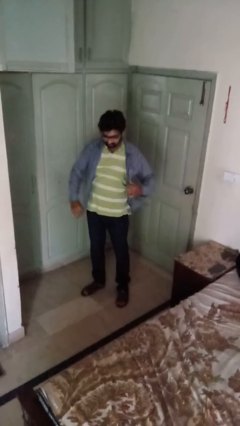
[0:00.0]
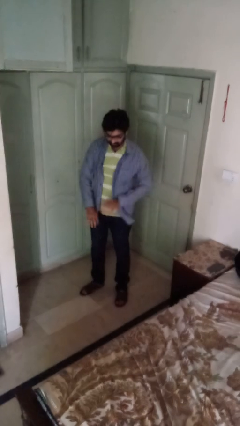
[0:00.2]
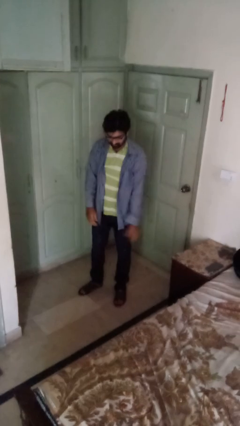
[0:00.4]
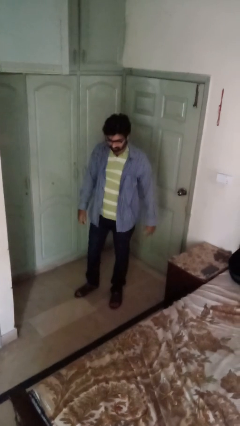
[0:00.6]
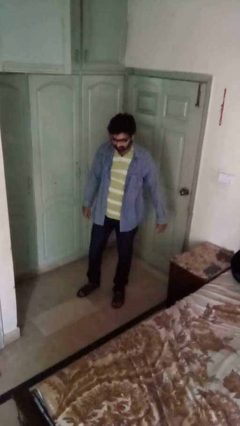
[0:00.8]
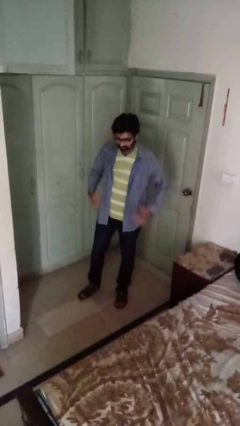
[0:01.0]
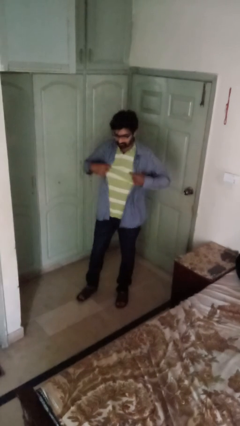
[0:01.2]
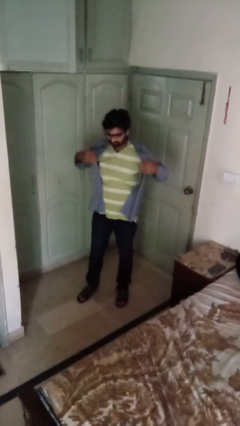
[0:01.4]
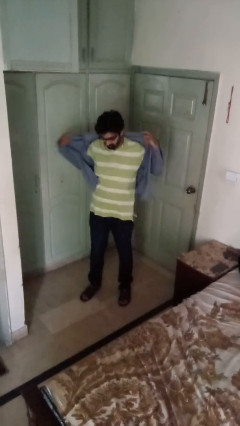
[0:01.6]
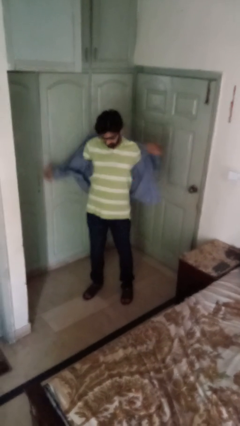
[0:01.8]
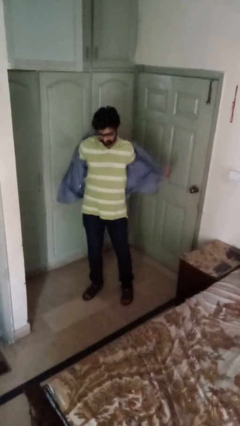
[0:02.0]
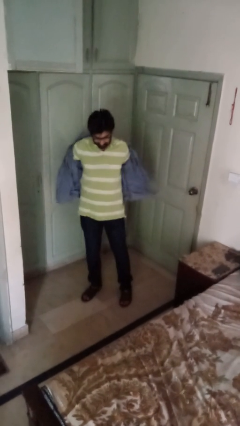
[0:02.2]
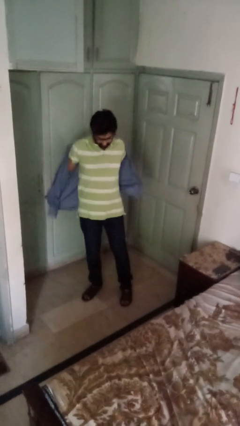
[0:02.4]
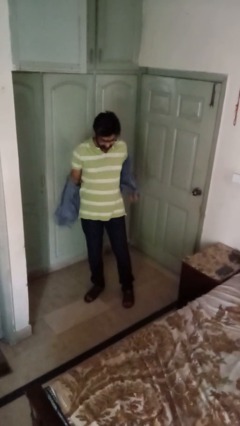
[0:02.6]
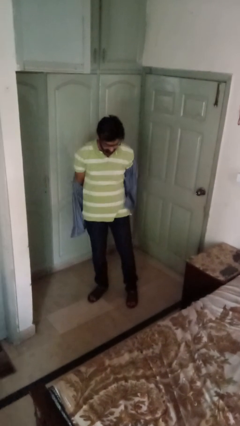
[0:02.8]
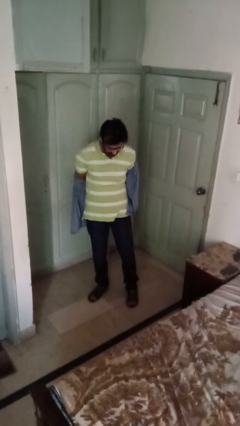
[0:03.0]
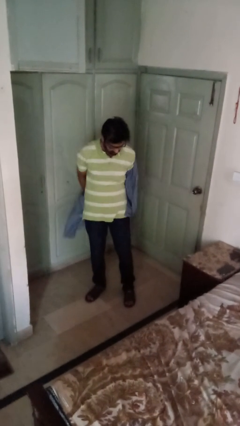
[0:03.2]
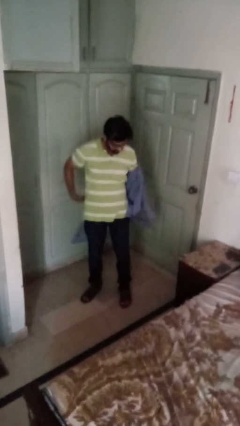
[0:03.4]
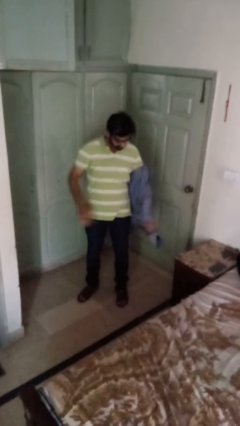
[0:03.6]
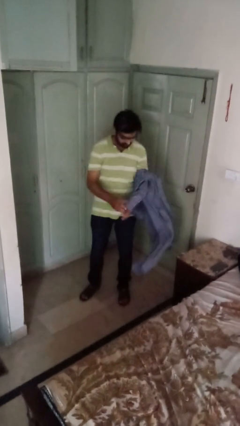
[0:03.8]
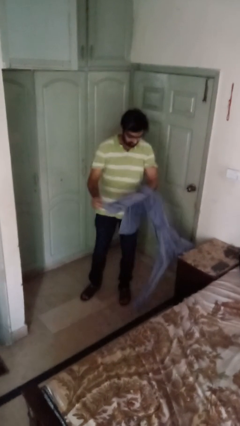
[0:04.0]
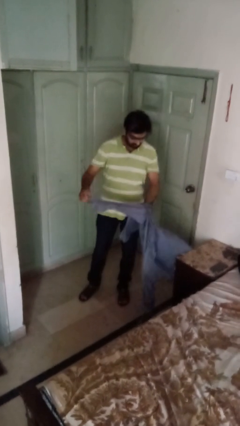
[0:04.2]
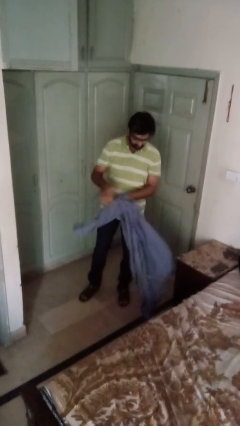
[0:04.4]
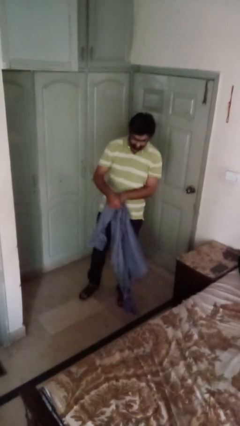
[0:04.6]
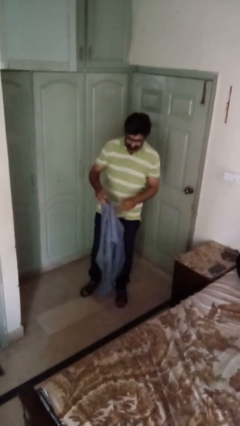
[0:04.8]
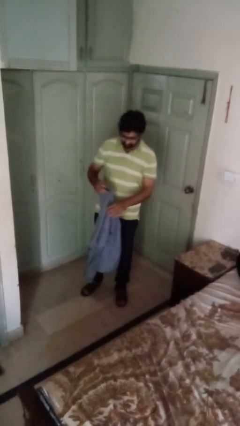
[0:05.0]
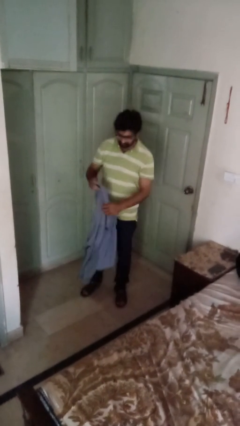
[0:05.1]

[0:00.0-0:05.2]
person takes off shirt

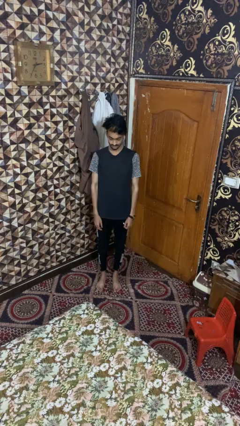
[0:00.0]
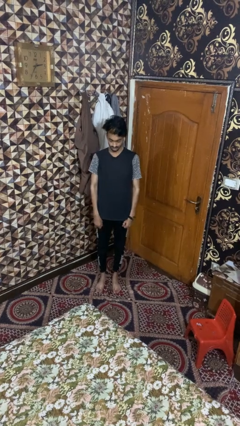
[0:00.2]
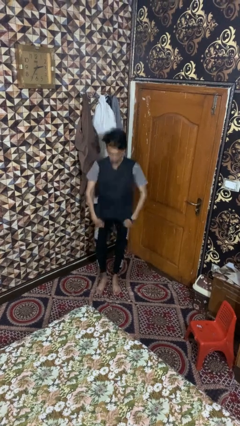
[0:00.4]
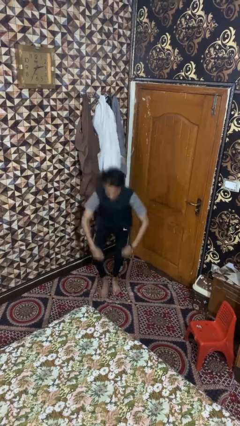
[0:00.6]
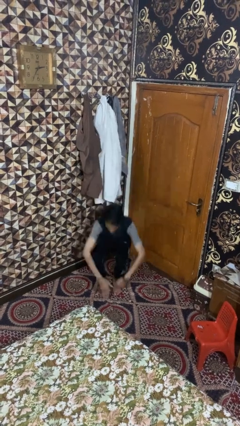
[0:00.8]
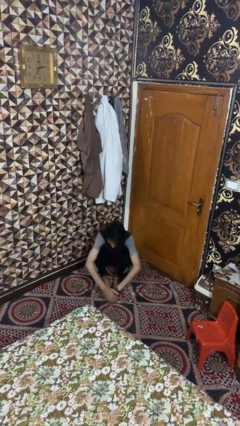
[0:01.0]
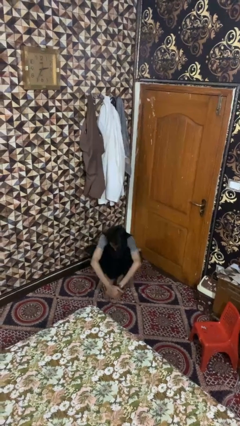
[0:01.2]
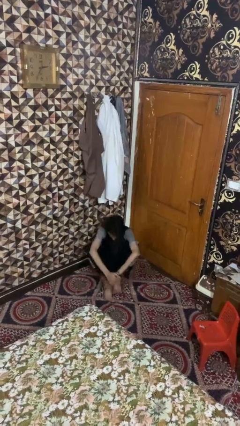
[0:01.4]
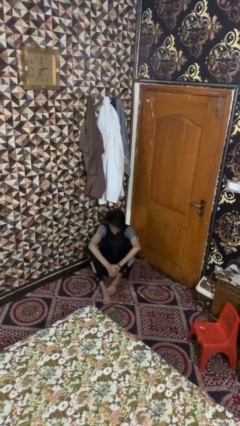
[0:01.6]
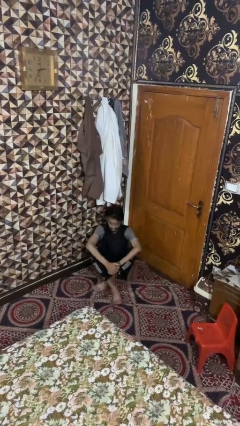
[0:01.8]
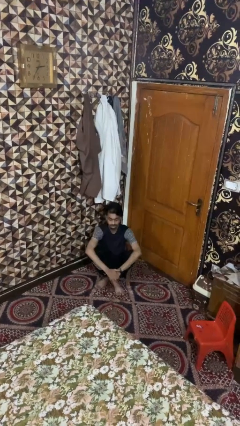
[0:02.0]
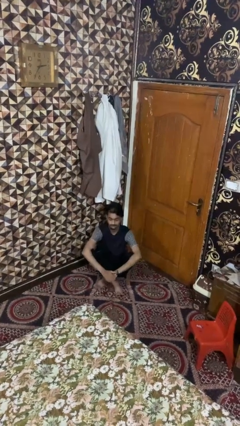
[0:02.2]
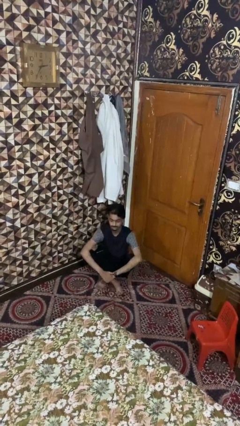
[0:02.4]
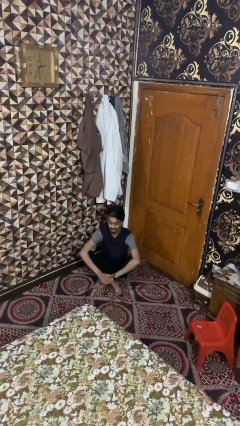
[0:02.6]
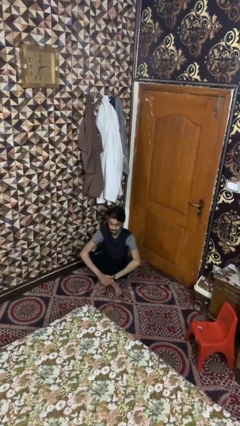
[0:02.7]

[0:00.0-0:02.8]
person sits crisscross

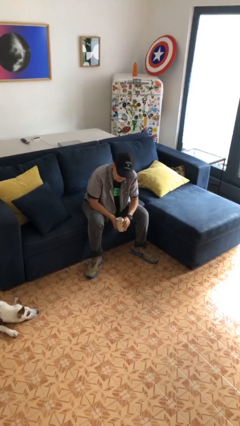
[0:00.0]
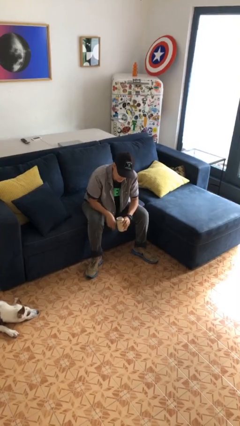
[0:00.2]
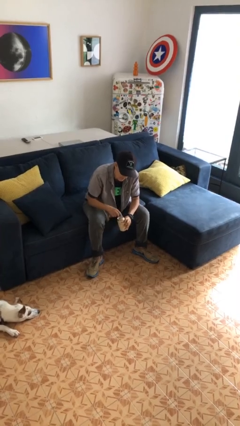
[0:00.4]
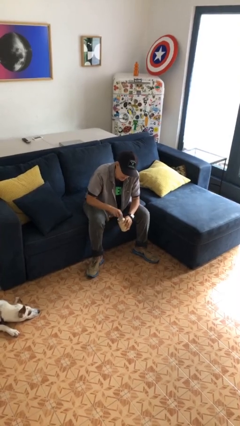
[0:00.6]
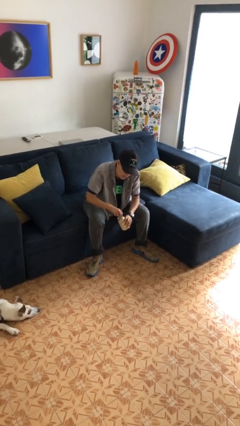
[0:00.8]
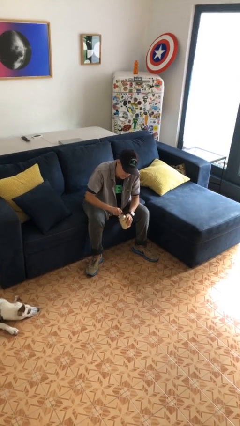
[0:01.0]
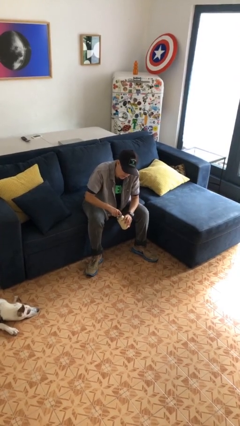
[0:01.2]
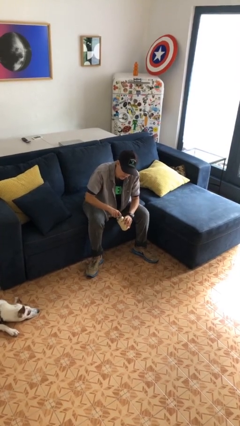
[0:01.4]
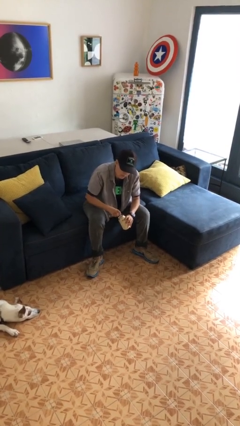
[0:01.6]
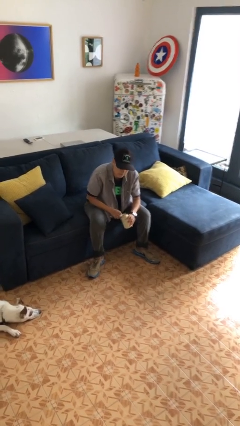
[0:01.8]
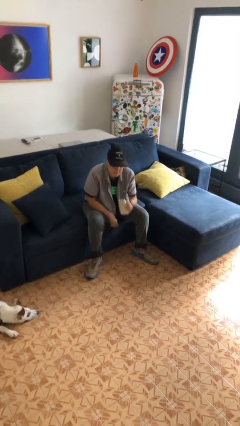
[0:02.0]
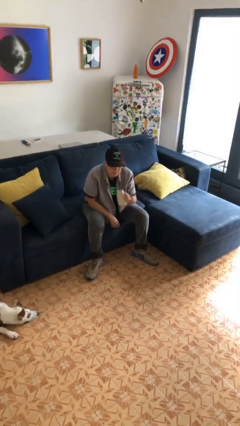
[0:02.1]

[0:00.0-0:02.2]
person opens beverage can

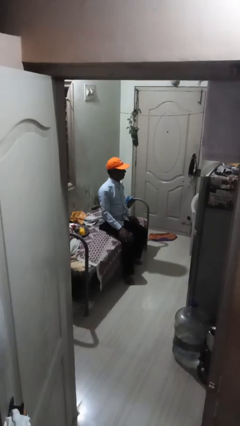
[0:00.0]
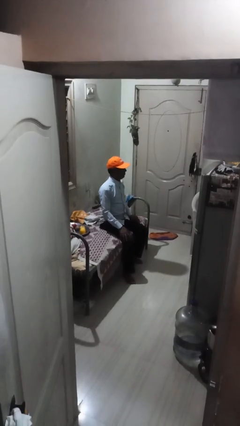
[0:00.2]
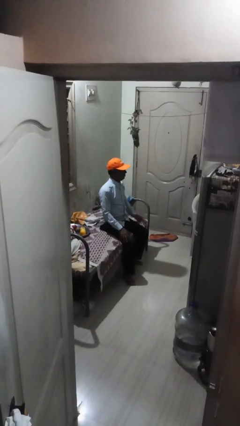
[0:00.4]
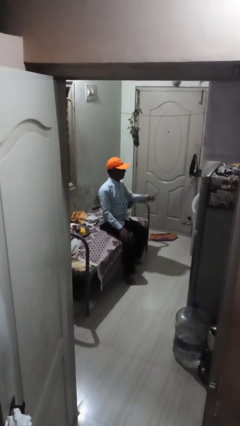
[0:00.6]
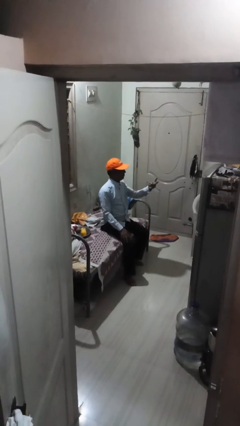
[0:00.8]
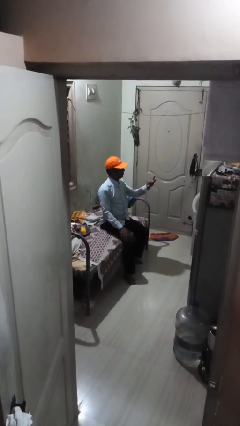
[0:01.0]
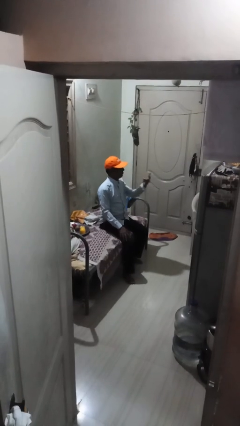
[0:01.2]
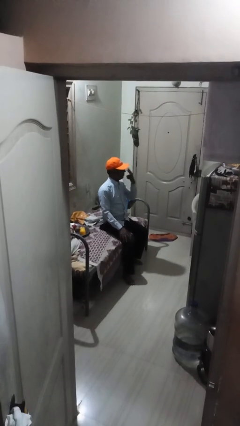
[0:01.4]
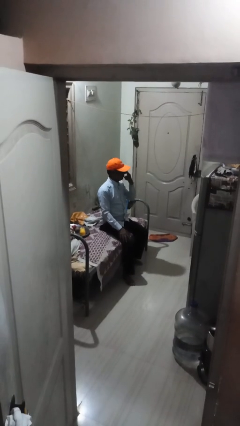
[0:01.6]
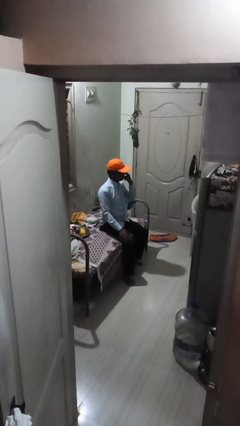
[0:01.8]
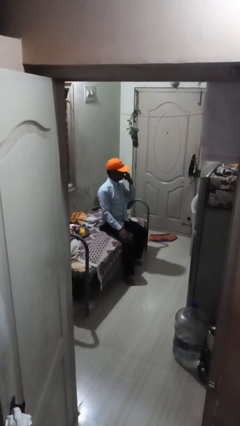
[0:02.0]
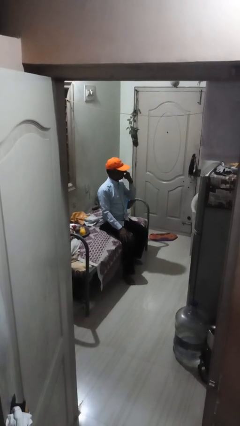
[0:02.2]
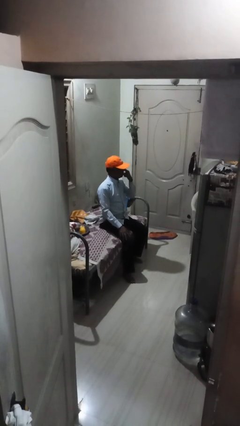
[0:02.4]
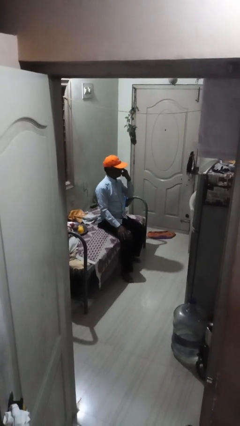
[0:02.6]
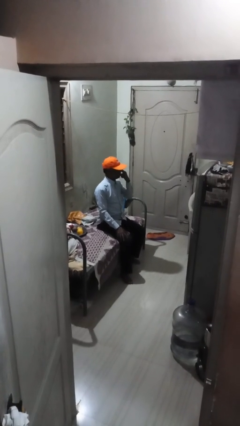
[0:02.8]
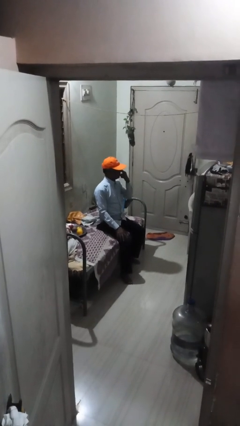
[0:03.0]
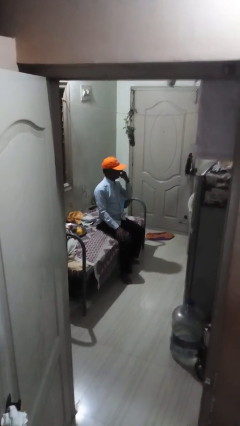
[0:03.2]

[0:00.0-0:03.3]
person gestures watch closely

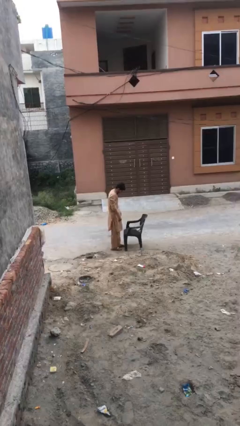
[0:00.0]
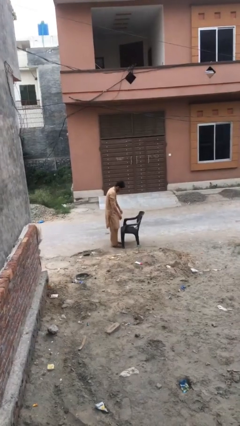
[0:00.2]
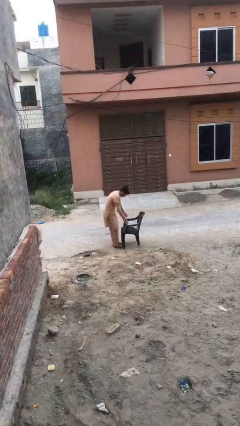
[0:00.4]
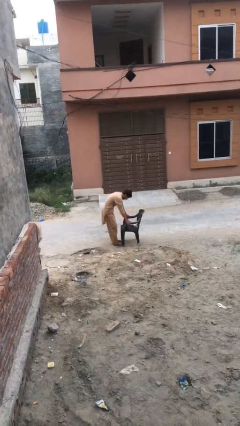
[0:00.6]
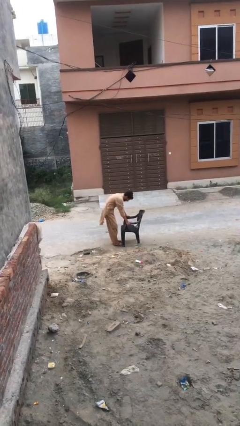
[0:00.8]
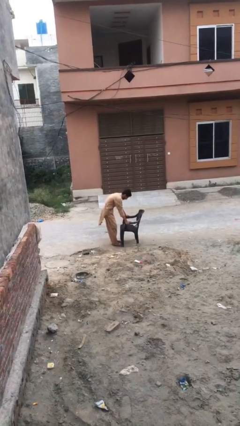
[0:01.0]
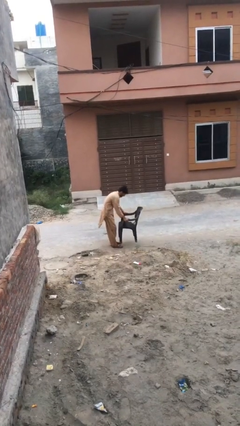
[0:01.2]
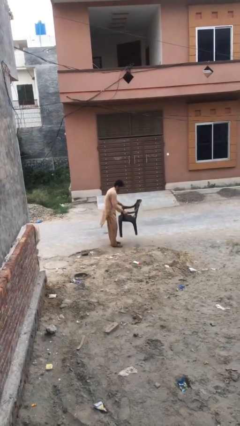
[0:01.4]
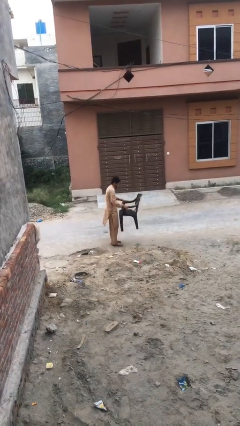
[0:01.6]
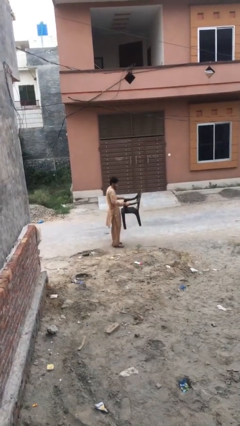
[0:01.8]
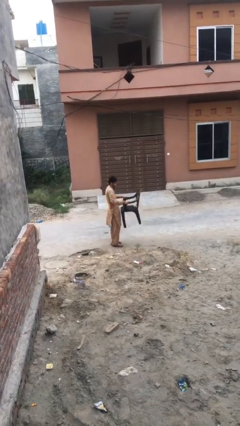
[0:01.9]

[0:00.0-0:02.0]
person picks up object from floor

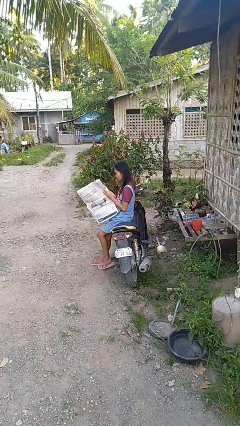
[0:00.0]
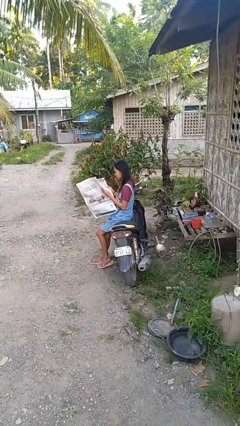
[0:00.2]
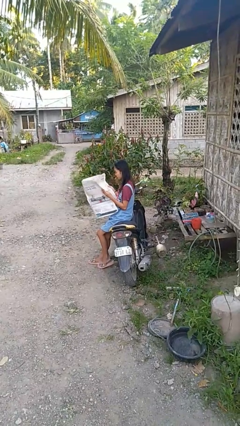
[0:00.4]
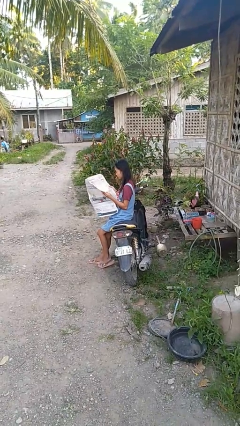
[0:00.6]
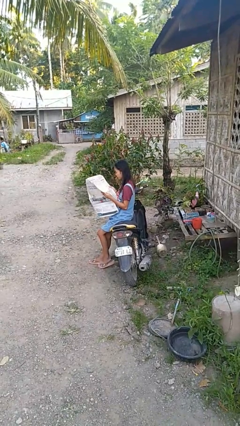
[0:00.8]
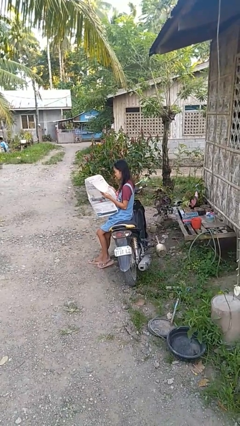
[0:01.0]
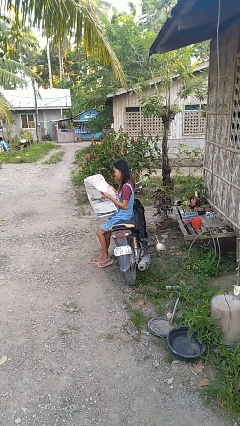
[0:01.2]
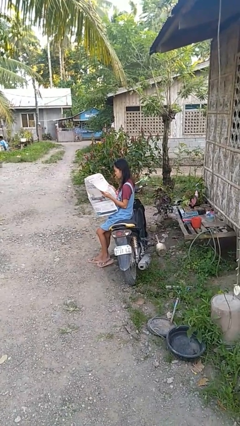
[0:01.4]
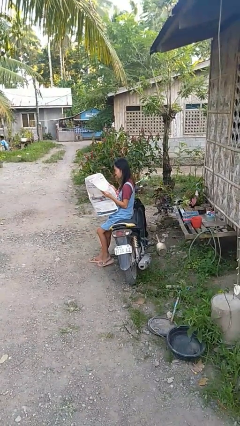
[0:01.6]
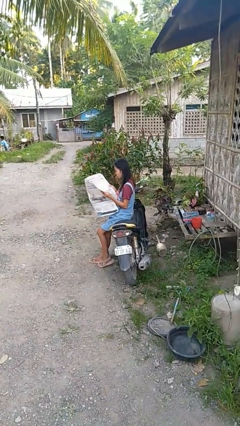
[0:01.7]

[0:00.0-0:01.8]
person reads newspaper
